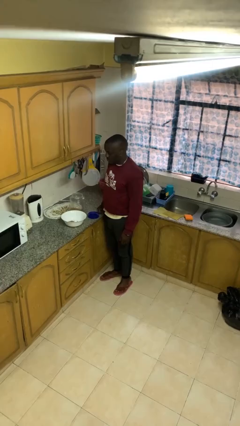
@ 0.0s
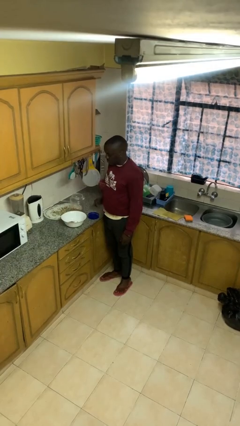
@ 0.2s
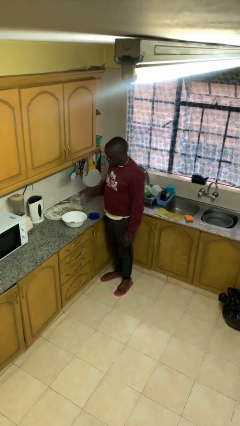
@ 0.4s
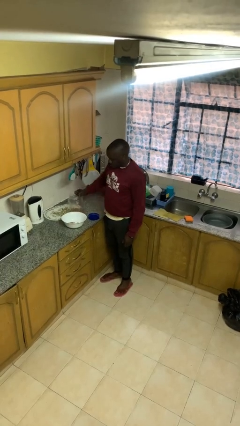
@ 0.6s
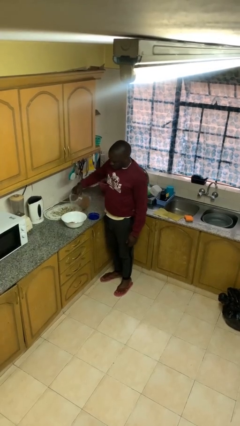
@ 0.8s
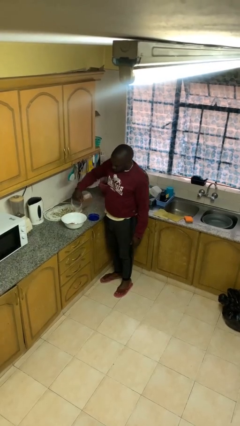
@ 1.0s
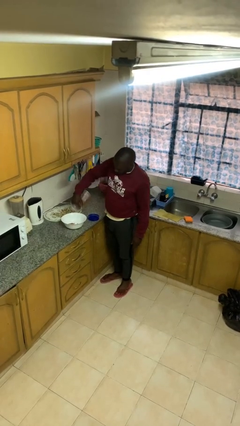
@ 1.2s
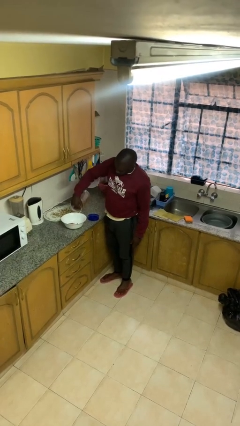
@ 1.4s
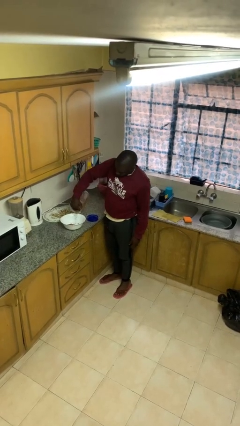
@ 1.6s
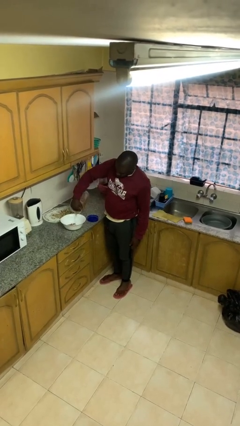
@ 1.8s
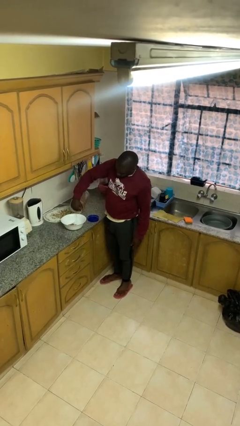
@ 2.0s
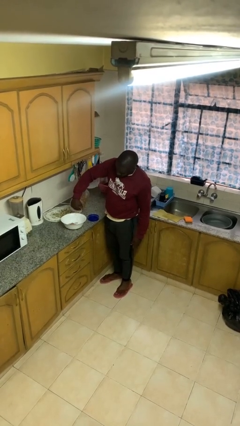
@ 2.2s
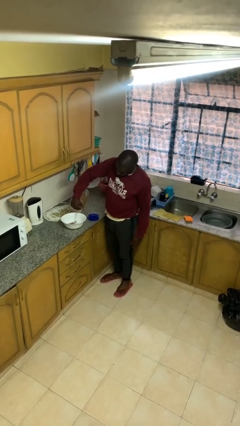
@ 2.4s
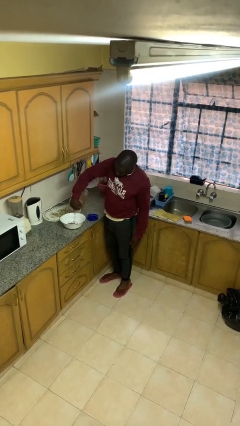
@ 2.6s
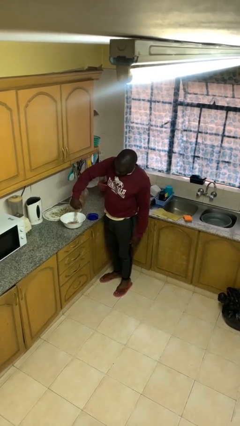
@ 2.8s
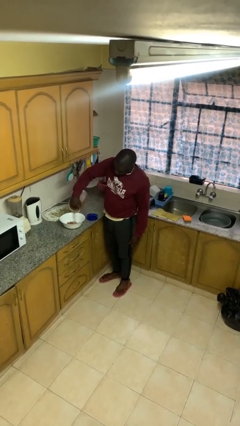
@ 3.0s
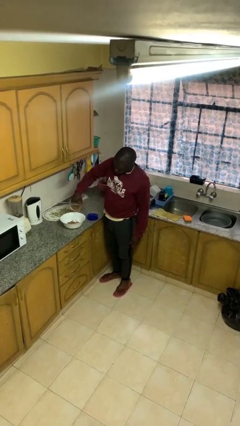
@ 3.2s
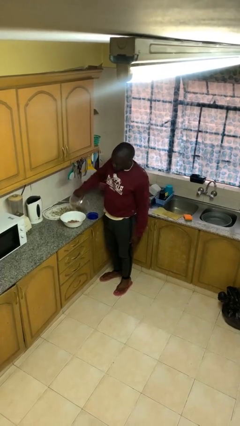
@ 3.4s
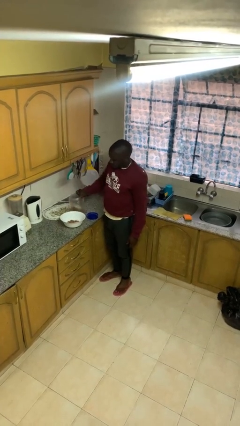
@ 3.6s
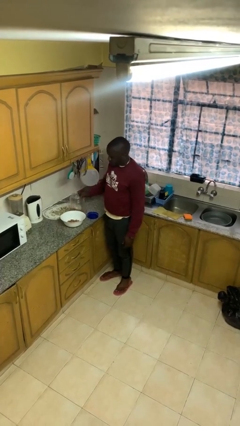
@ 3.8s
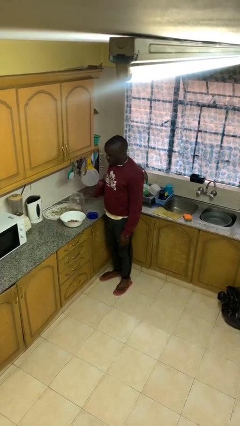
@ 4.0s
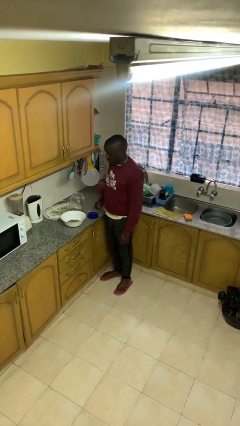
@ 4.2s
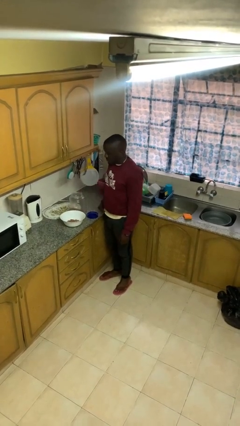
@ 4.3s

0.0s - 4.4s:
person pours into bowl

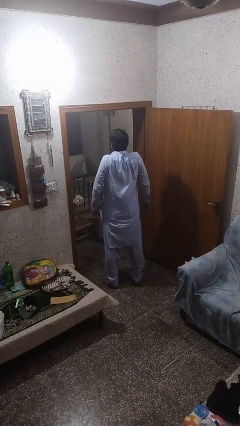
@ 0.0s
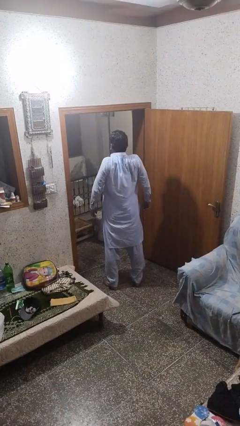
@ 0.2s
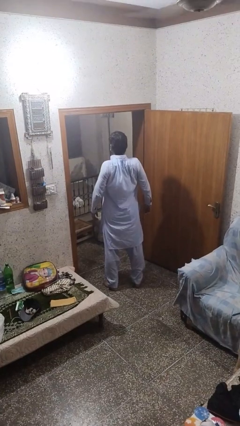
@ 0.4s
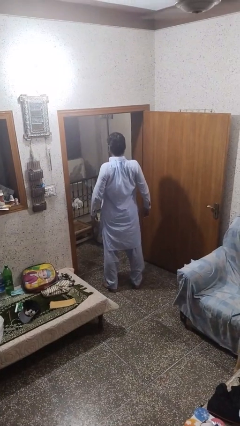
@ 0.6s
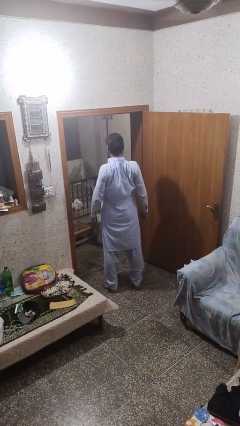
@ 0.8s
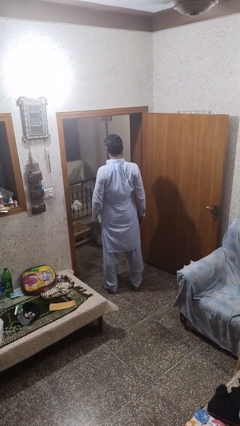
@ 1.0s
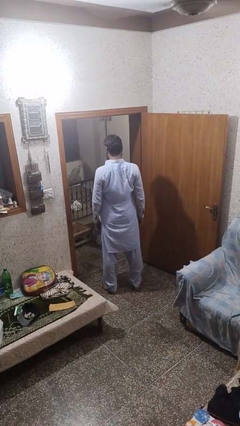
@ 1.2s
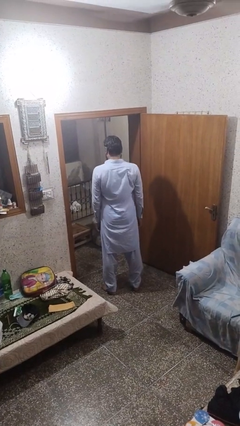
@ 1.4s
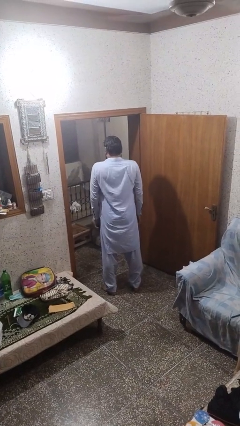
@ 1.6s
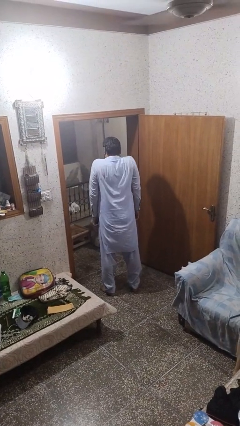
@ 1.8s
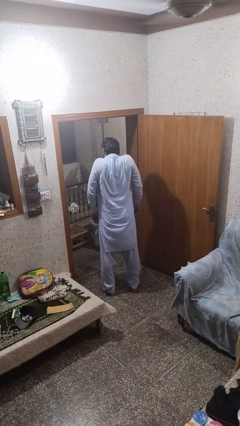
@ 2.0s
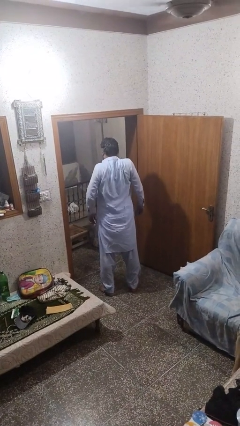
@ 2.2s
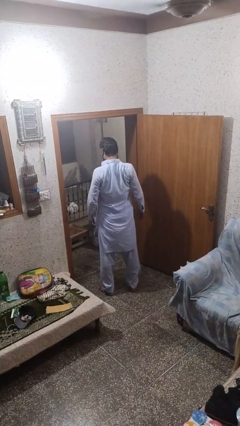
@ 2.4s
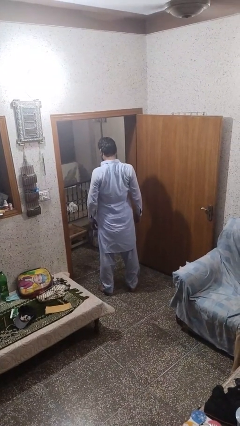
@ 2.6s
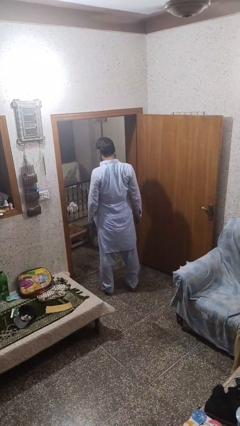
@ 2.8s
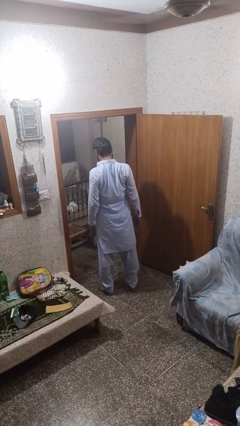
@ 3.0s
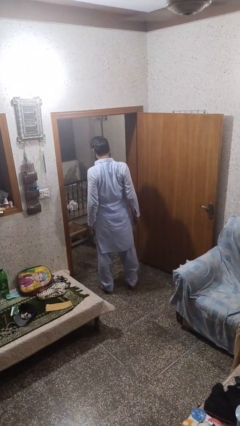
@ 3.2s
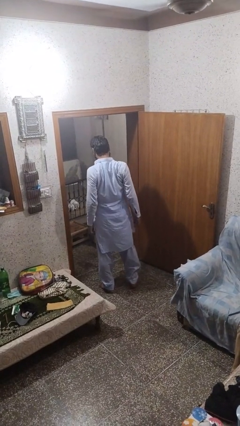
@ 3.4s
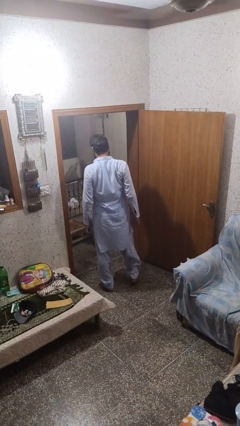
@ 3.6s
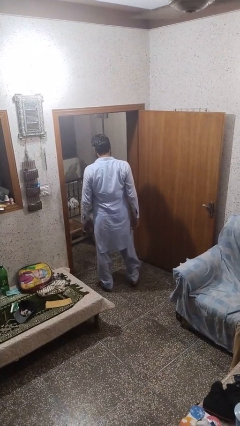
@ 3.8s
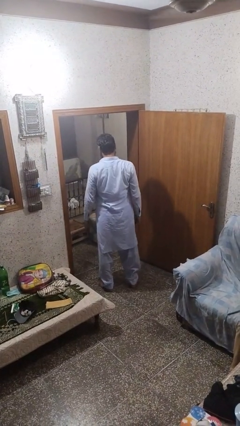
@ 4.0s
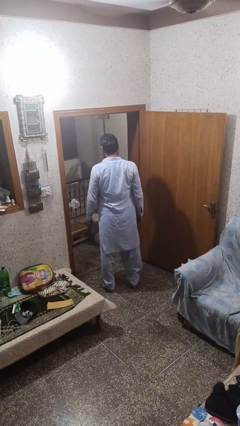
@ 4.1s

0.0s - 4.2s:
person stretches back

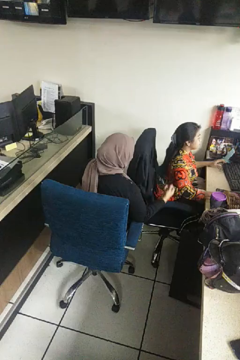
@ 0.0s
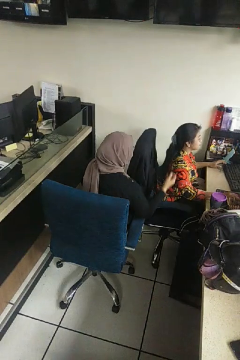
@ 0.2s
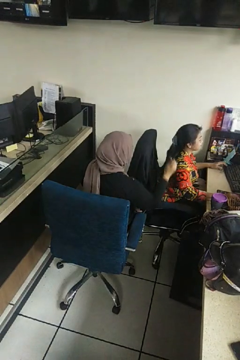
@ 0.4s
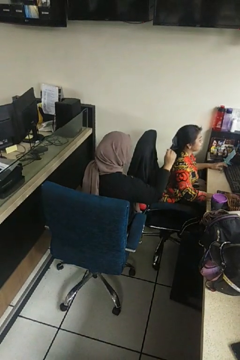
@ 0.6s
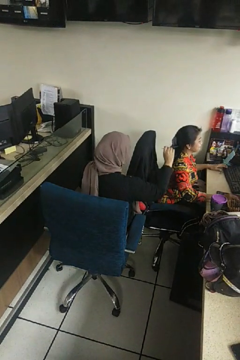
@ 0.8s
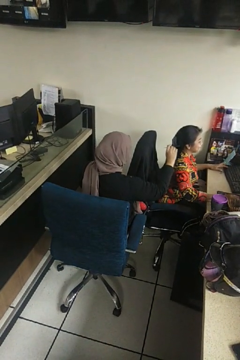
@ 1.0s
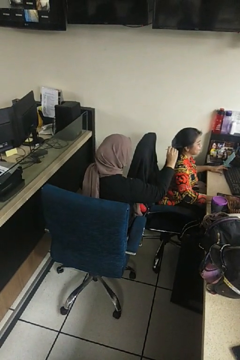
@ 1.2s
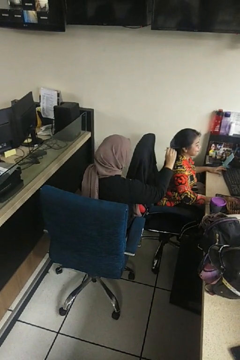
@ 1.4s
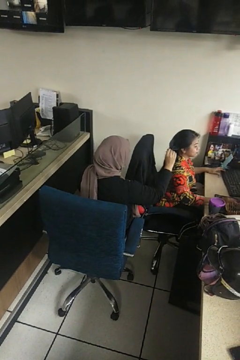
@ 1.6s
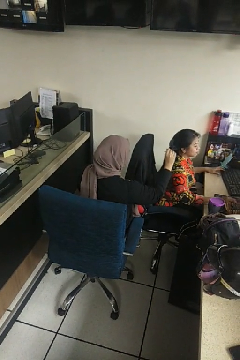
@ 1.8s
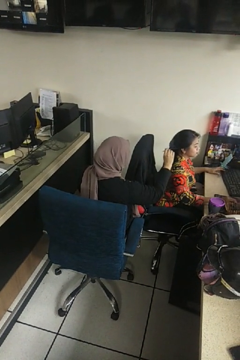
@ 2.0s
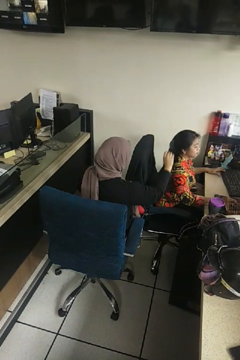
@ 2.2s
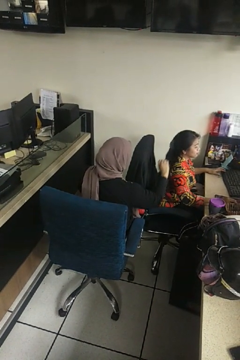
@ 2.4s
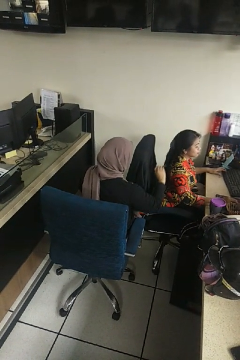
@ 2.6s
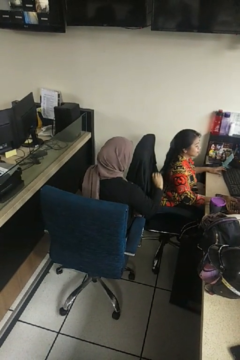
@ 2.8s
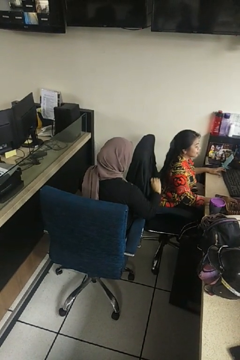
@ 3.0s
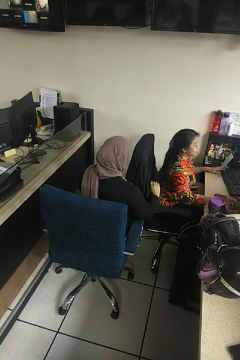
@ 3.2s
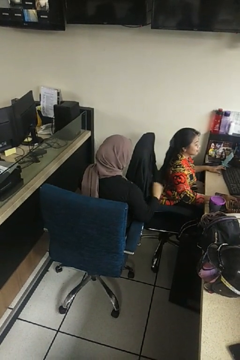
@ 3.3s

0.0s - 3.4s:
person brushes hair of person

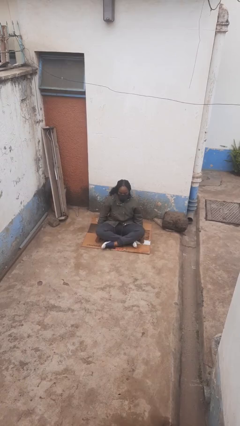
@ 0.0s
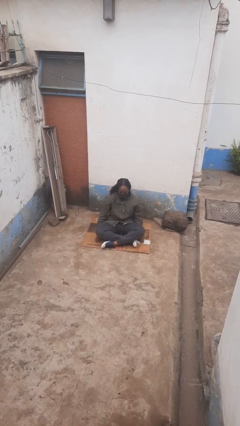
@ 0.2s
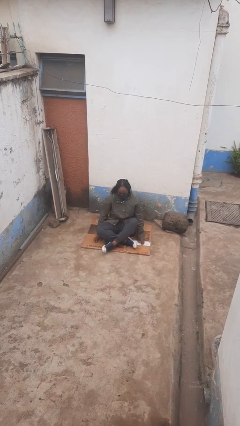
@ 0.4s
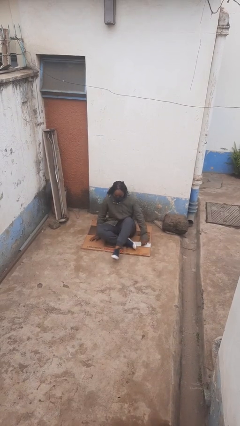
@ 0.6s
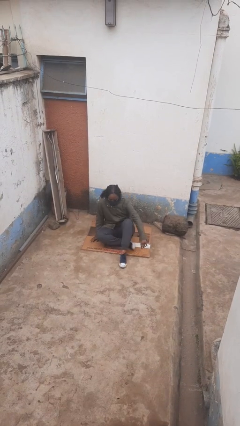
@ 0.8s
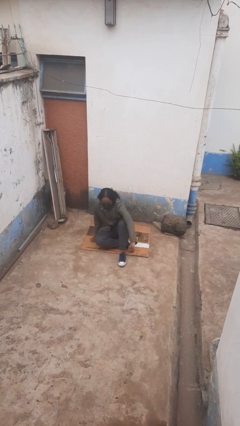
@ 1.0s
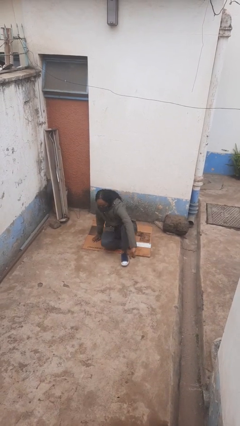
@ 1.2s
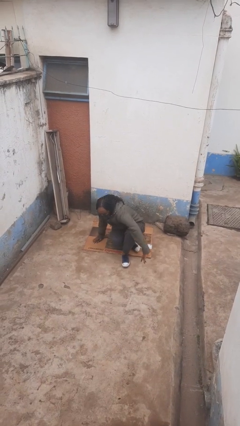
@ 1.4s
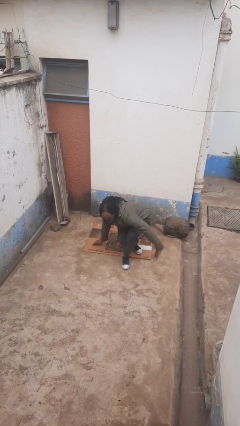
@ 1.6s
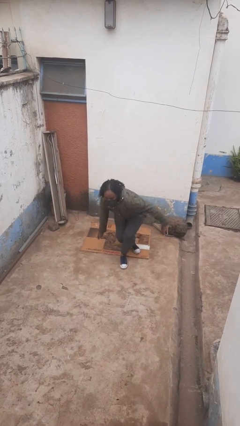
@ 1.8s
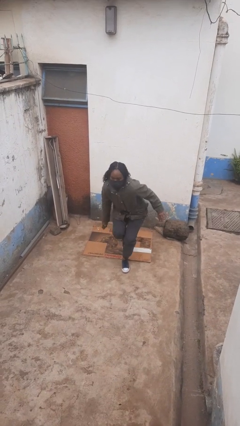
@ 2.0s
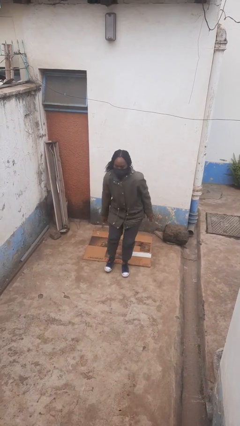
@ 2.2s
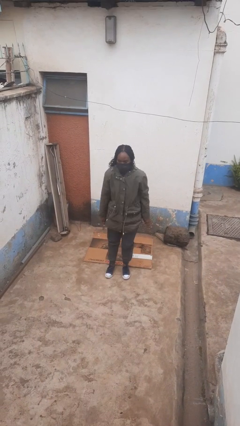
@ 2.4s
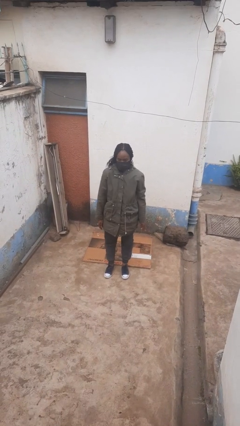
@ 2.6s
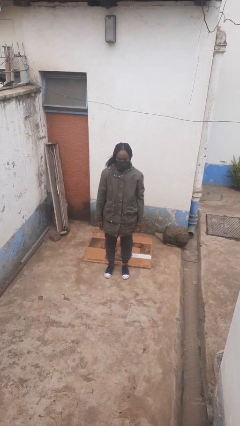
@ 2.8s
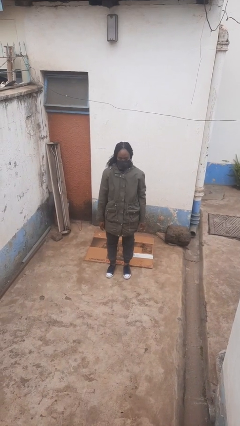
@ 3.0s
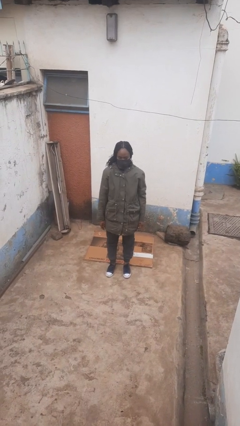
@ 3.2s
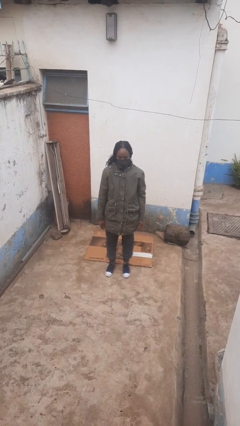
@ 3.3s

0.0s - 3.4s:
person stands up from floor

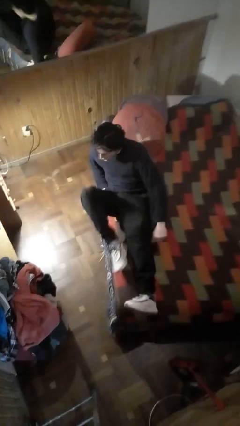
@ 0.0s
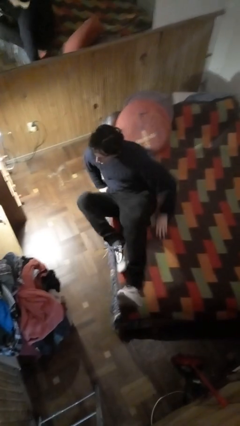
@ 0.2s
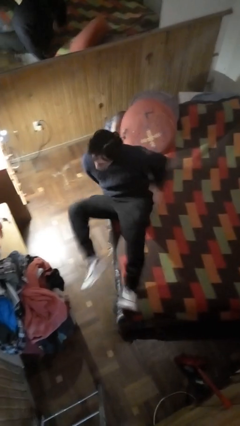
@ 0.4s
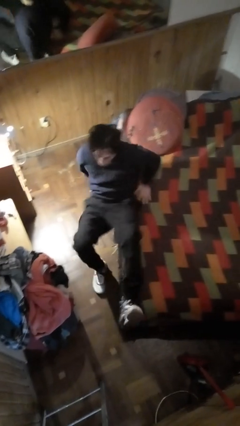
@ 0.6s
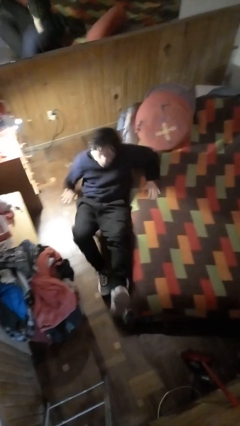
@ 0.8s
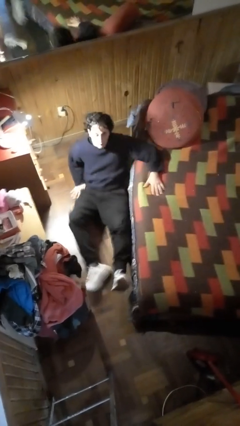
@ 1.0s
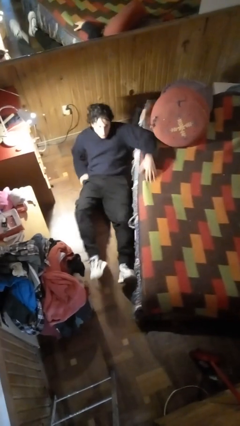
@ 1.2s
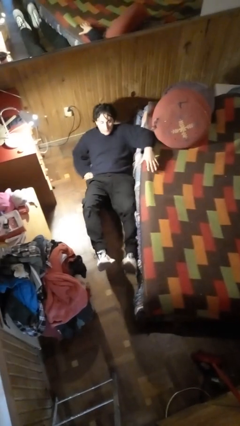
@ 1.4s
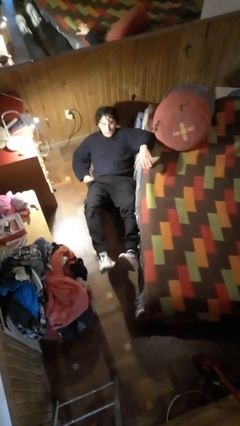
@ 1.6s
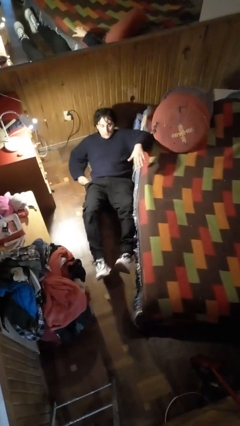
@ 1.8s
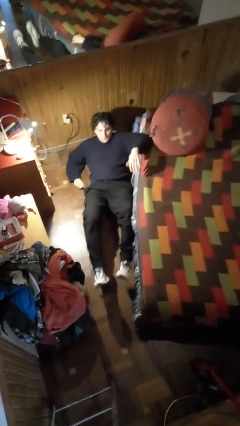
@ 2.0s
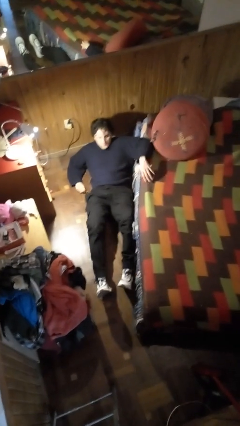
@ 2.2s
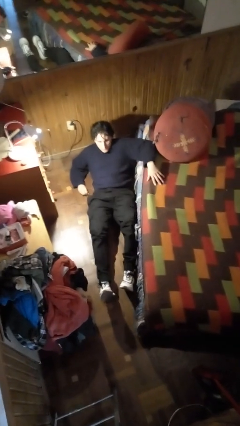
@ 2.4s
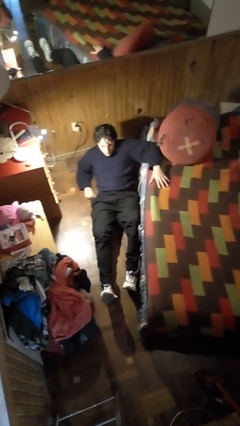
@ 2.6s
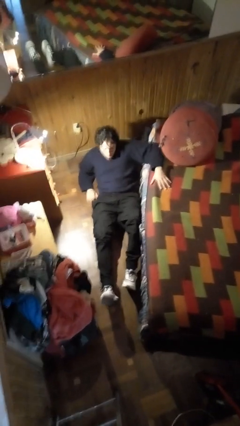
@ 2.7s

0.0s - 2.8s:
person falls from bed
